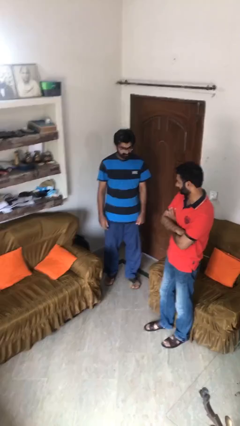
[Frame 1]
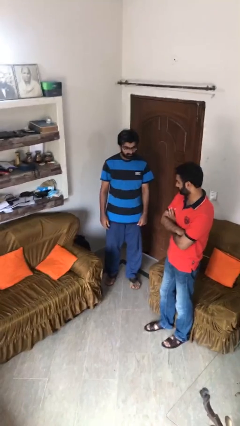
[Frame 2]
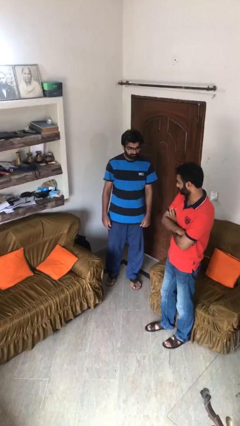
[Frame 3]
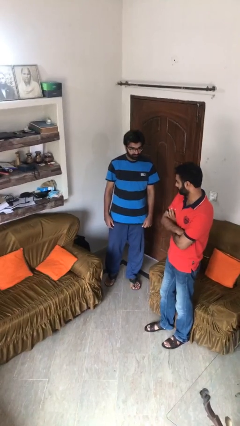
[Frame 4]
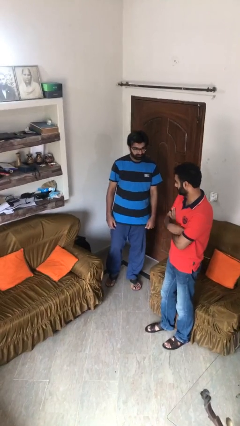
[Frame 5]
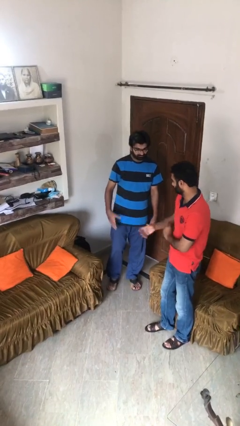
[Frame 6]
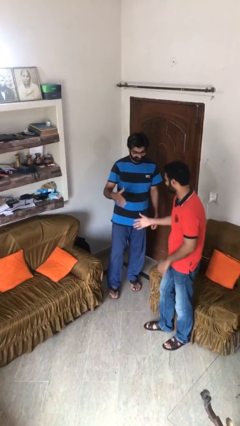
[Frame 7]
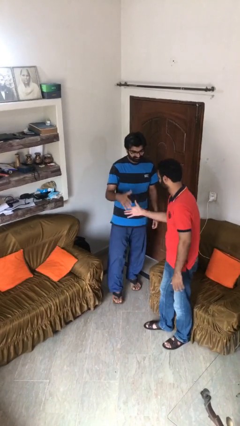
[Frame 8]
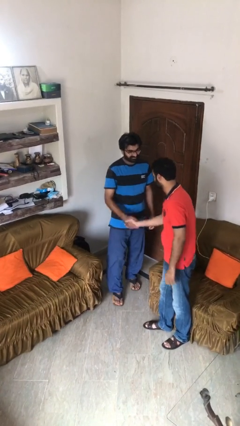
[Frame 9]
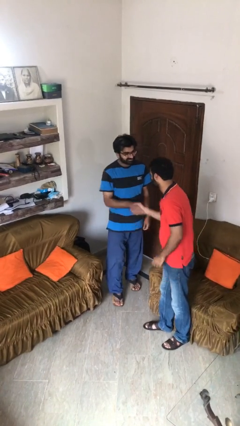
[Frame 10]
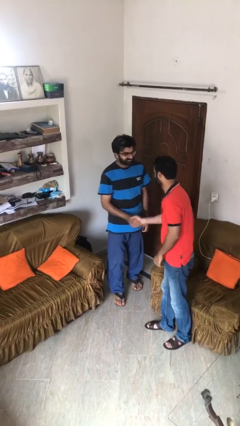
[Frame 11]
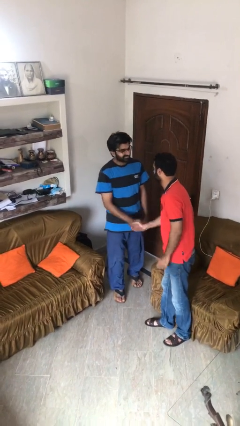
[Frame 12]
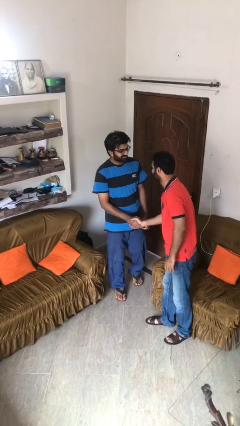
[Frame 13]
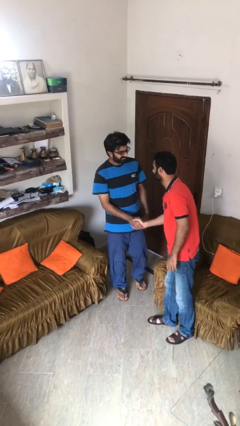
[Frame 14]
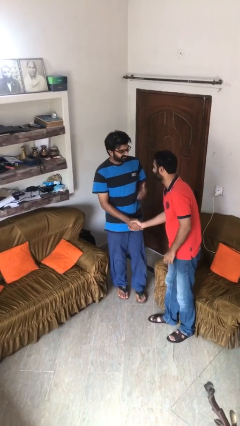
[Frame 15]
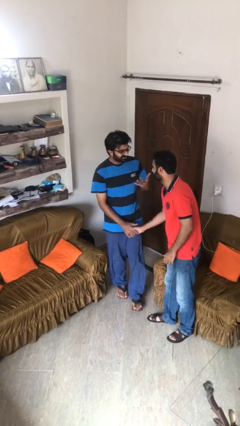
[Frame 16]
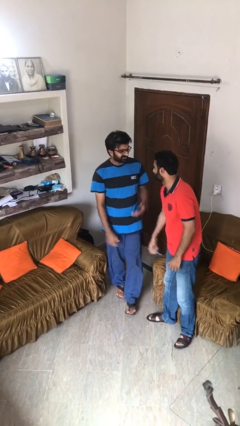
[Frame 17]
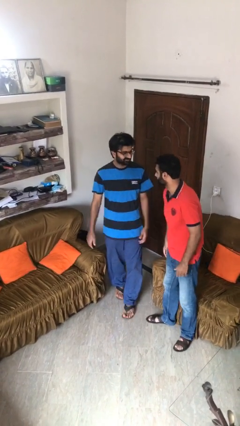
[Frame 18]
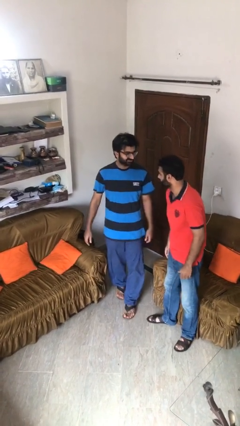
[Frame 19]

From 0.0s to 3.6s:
person shakes hand

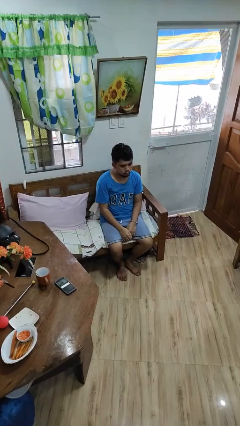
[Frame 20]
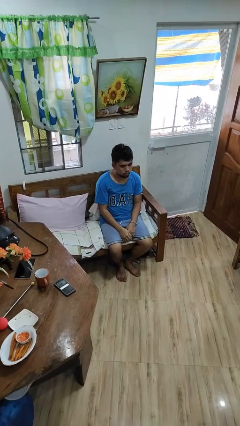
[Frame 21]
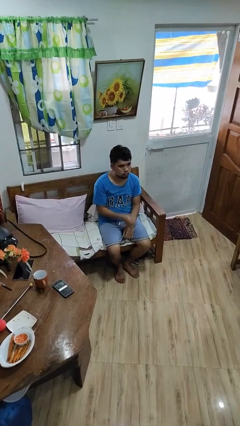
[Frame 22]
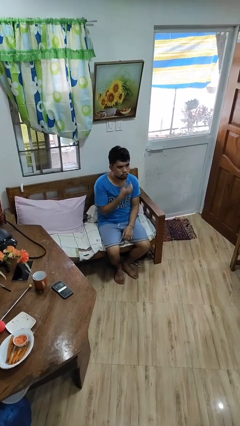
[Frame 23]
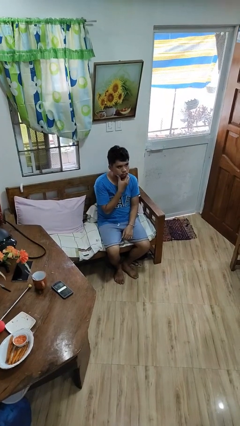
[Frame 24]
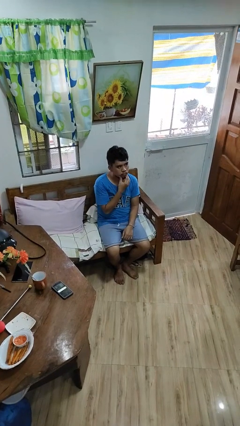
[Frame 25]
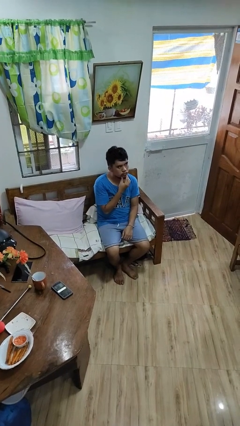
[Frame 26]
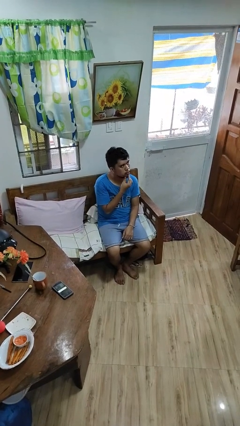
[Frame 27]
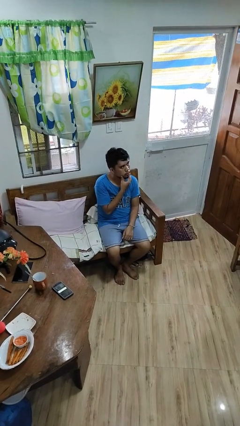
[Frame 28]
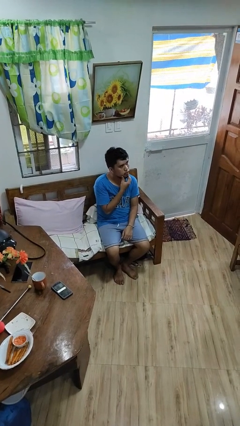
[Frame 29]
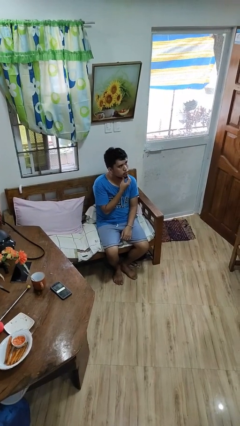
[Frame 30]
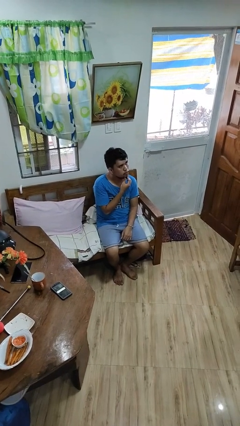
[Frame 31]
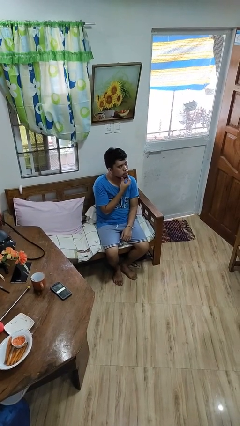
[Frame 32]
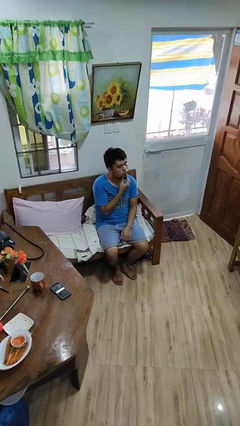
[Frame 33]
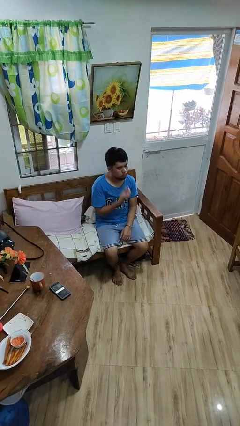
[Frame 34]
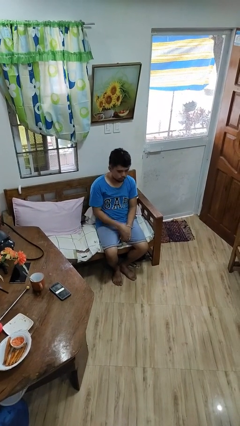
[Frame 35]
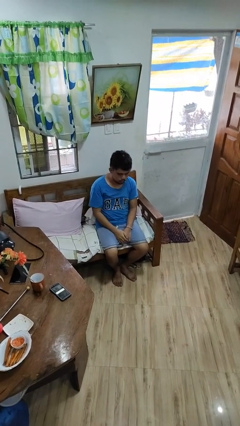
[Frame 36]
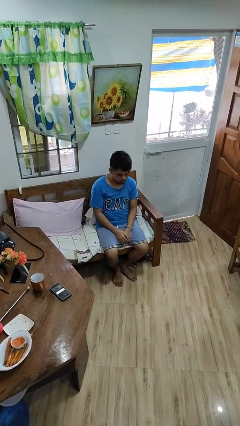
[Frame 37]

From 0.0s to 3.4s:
person strokes chin

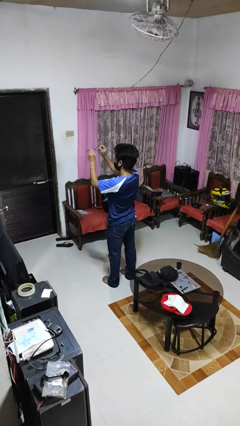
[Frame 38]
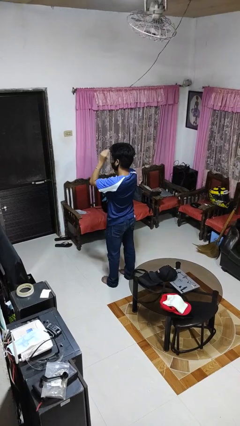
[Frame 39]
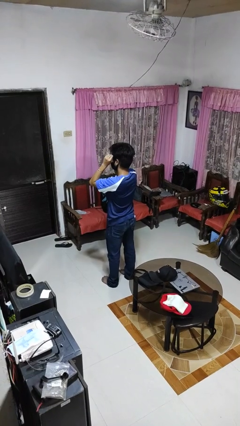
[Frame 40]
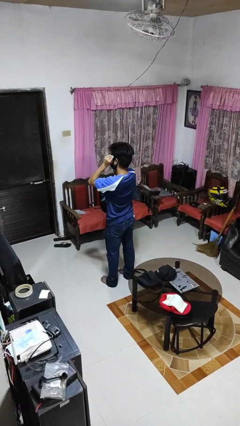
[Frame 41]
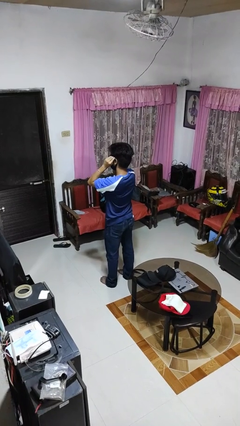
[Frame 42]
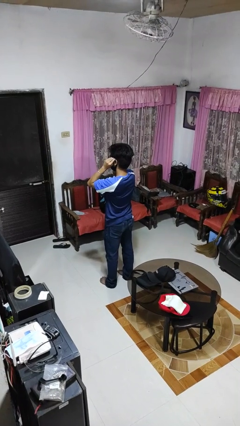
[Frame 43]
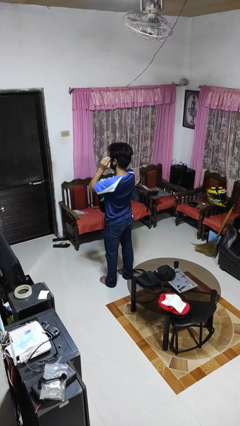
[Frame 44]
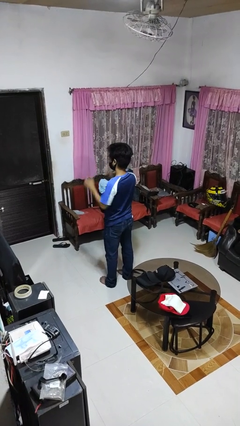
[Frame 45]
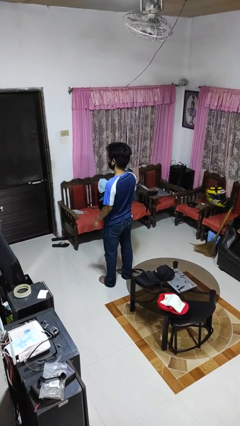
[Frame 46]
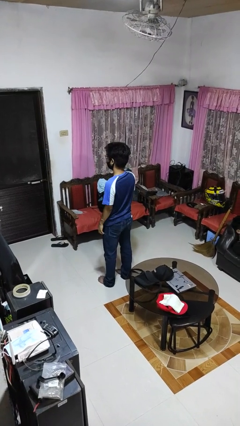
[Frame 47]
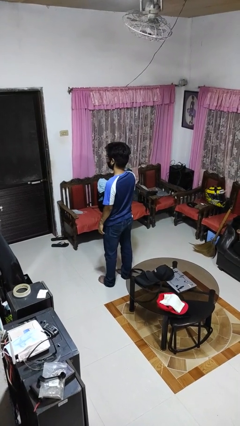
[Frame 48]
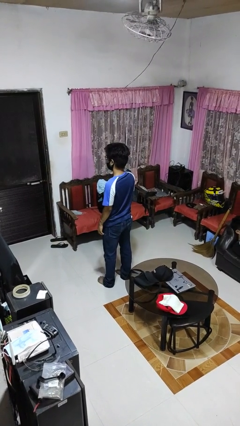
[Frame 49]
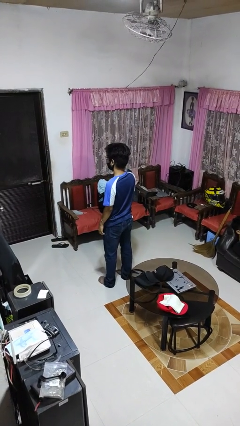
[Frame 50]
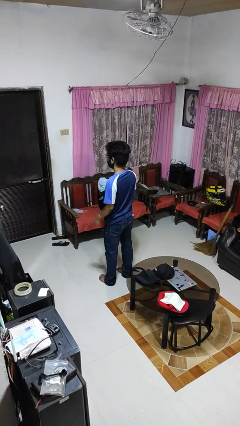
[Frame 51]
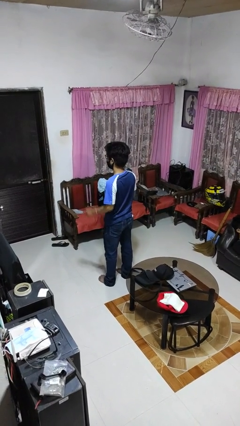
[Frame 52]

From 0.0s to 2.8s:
person puts on glasses

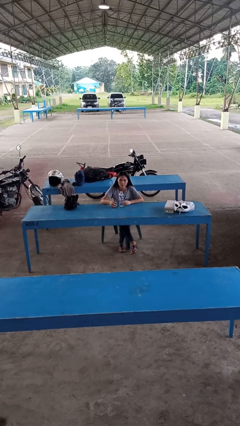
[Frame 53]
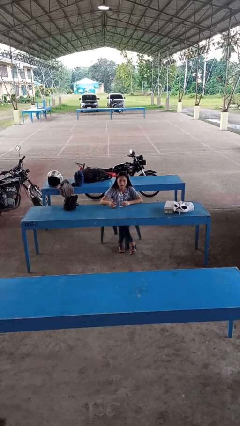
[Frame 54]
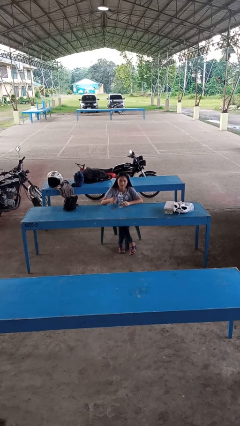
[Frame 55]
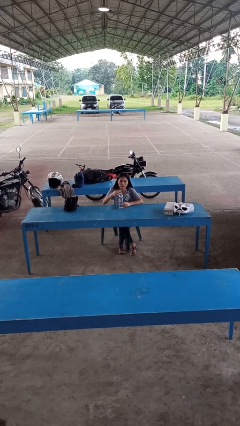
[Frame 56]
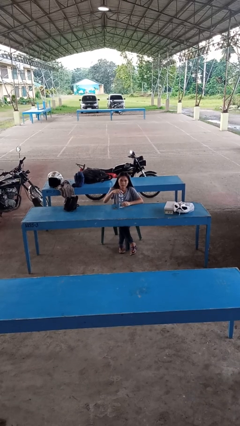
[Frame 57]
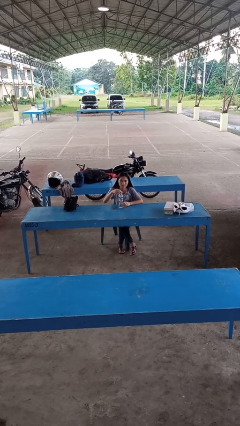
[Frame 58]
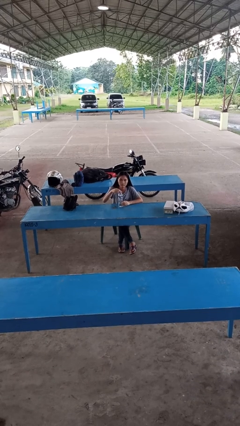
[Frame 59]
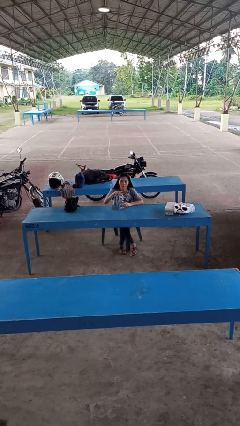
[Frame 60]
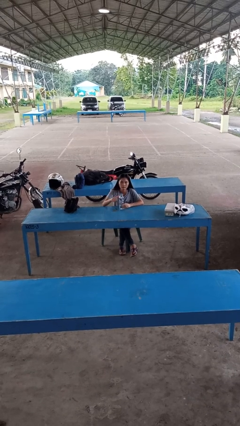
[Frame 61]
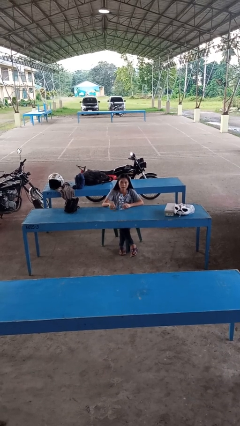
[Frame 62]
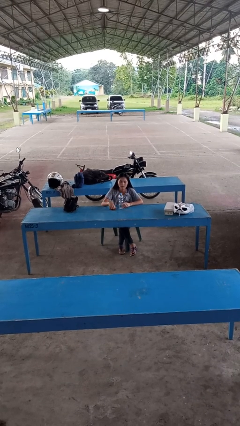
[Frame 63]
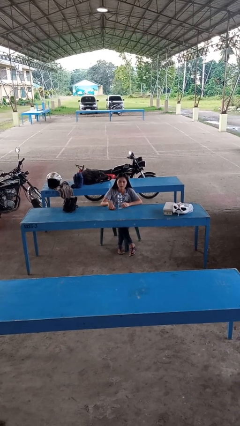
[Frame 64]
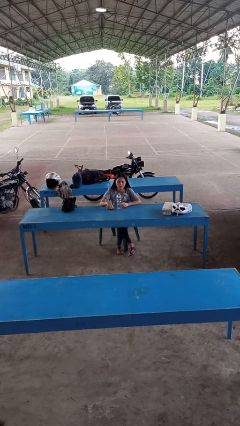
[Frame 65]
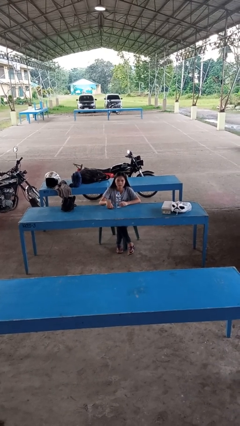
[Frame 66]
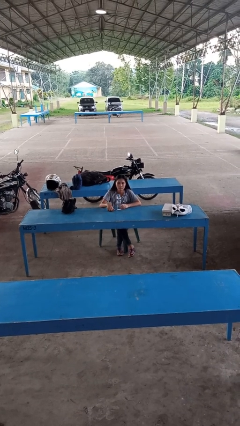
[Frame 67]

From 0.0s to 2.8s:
person screws lid to bottle

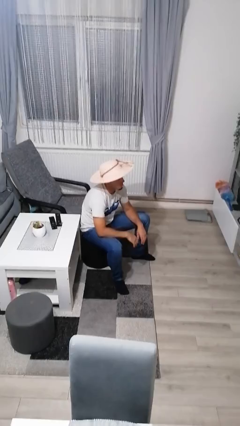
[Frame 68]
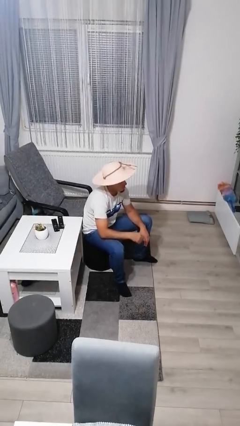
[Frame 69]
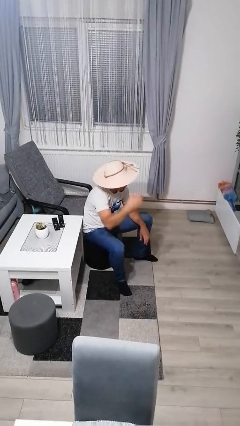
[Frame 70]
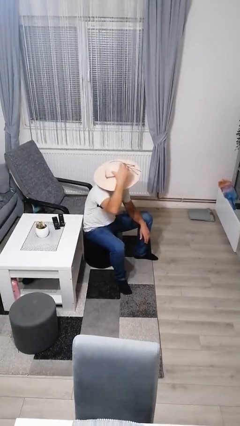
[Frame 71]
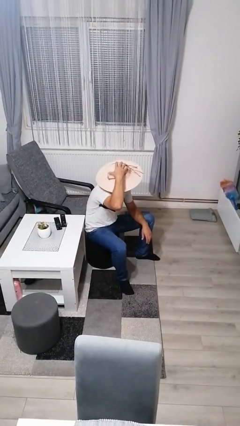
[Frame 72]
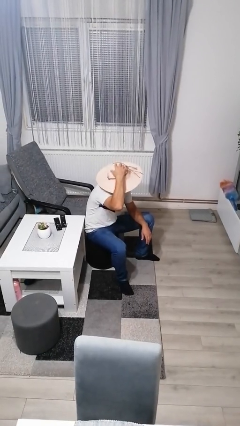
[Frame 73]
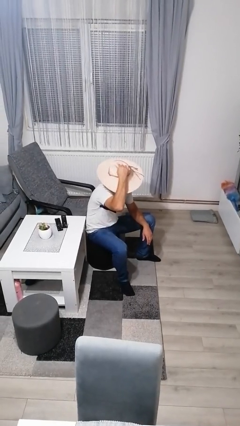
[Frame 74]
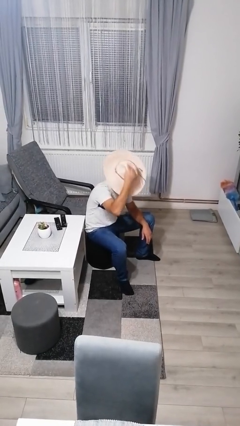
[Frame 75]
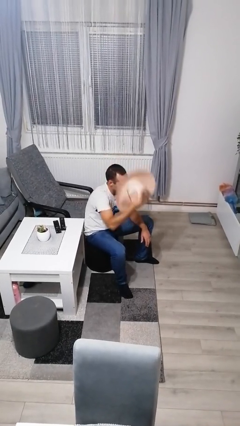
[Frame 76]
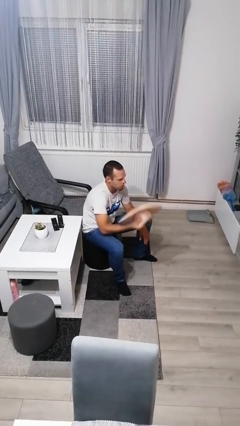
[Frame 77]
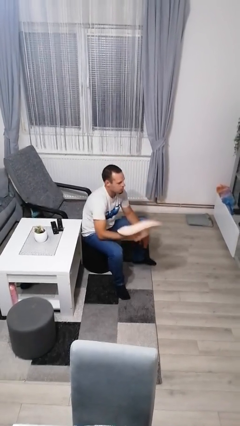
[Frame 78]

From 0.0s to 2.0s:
person takes off hat

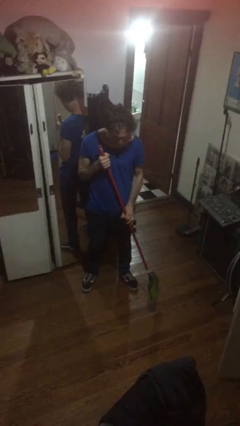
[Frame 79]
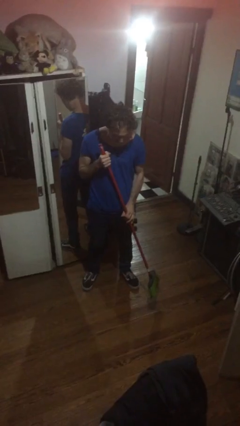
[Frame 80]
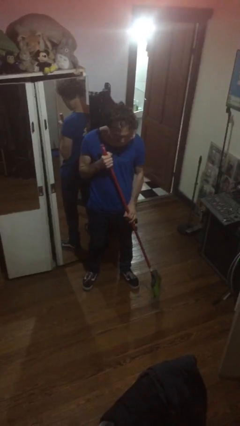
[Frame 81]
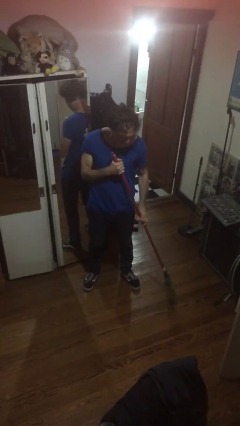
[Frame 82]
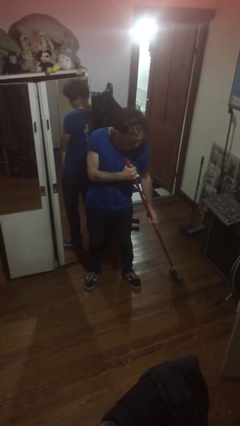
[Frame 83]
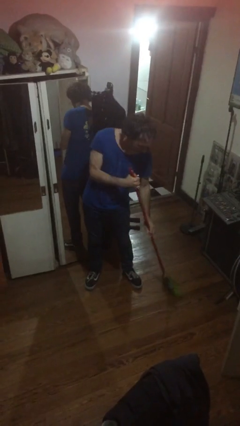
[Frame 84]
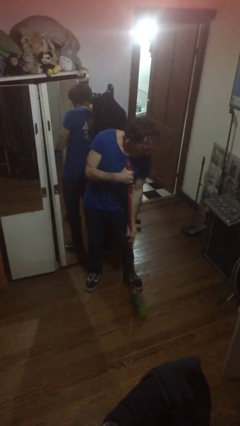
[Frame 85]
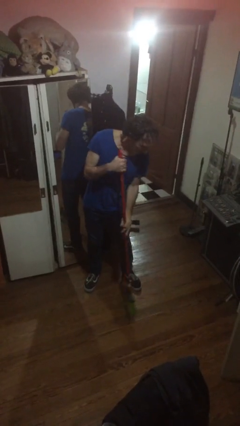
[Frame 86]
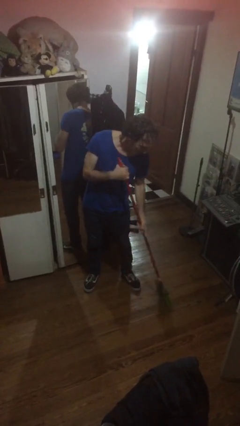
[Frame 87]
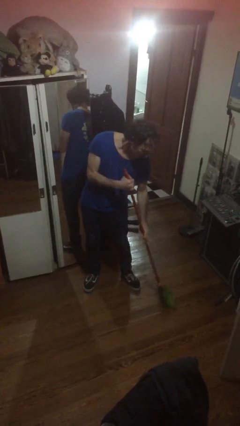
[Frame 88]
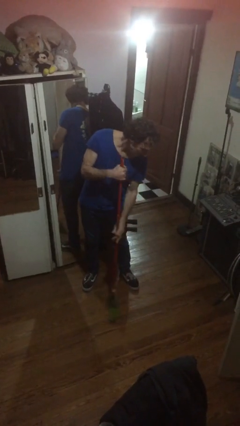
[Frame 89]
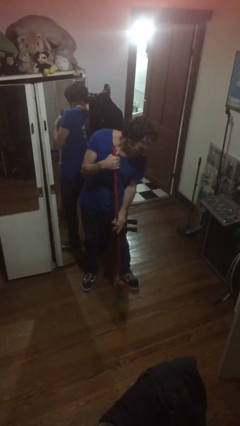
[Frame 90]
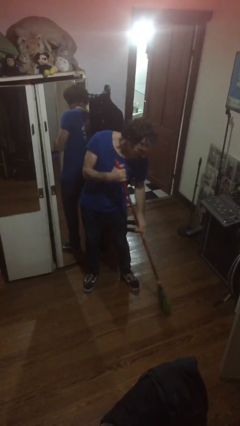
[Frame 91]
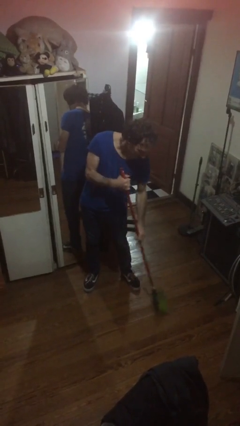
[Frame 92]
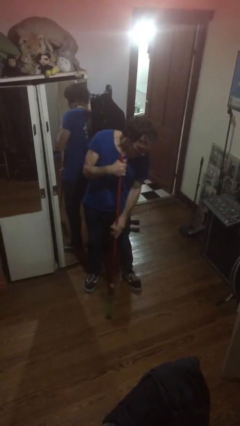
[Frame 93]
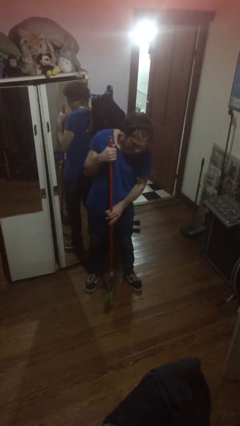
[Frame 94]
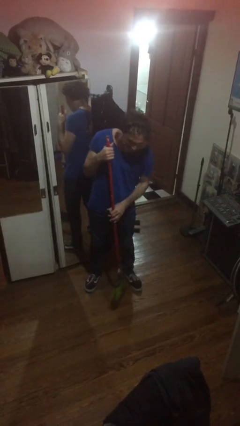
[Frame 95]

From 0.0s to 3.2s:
person sweeps floor
